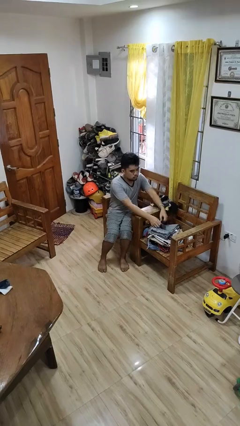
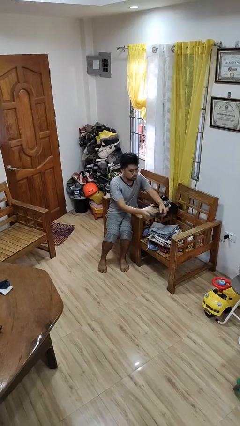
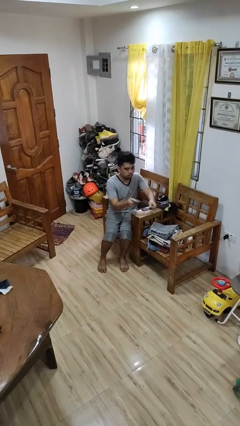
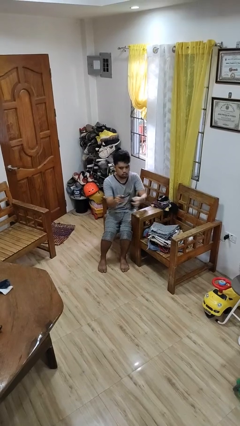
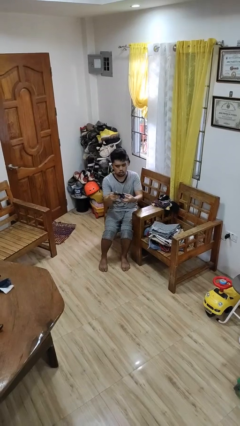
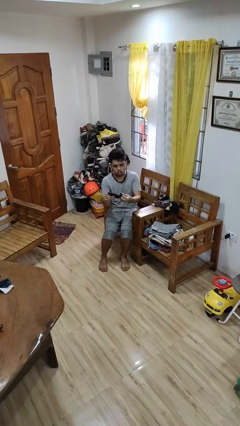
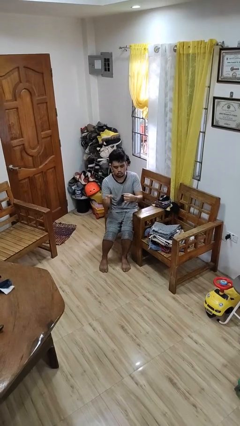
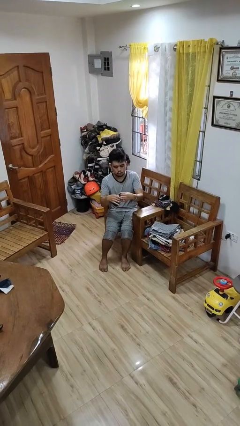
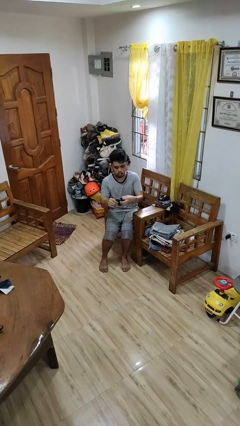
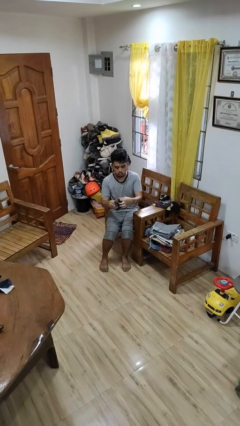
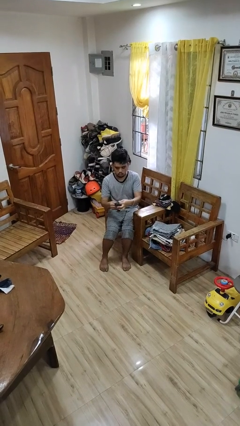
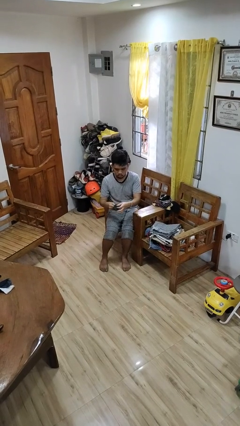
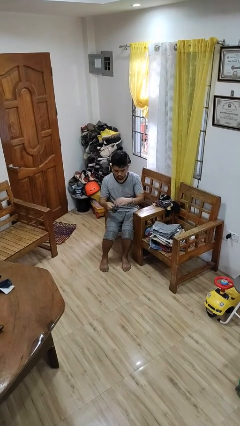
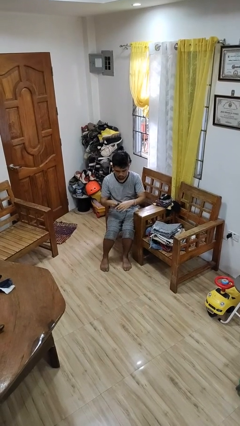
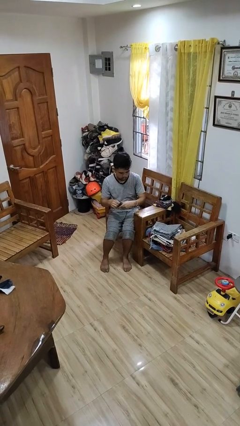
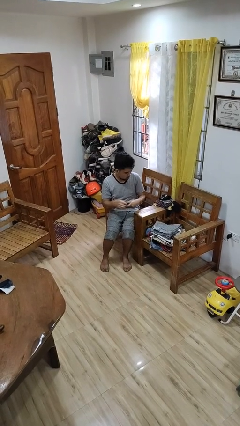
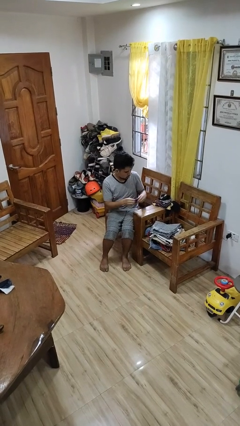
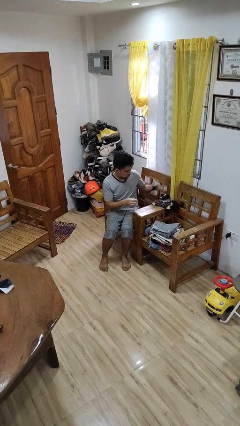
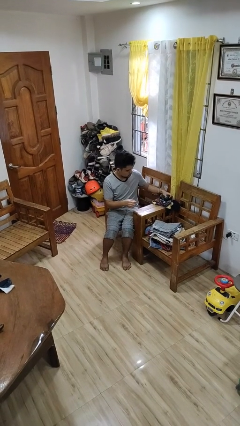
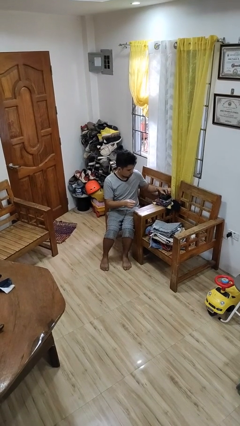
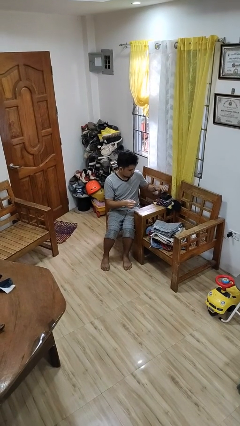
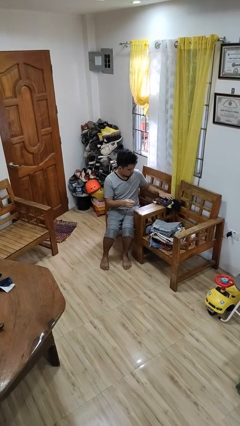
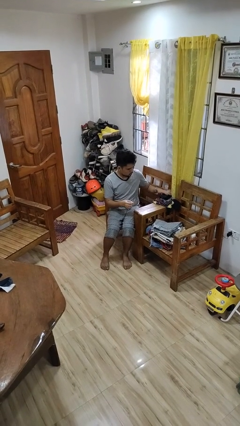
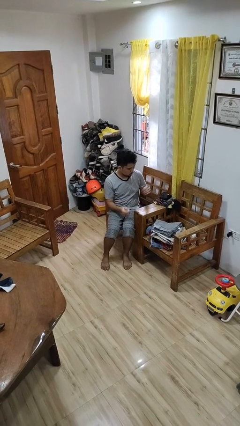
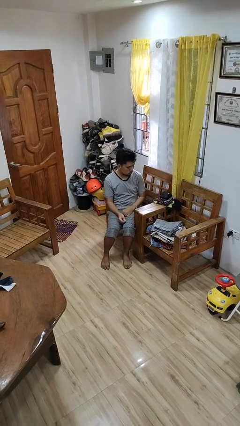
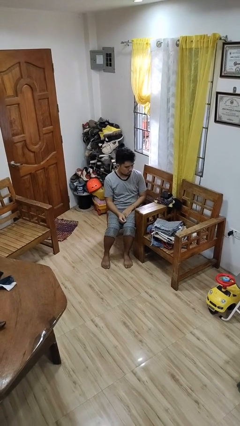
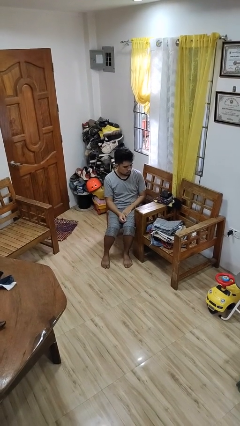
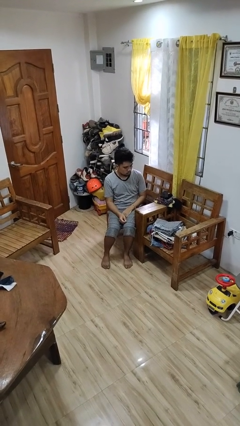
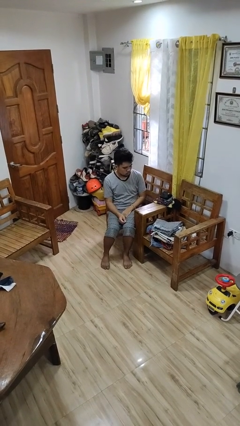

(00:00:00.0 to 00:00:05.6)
person folds socks

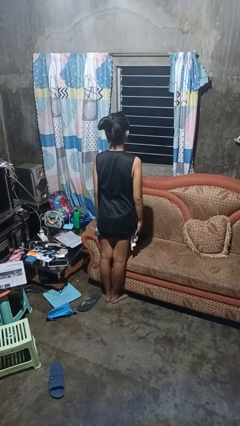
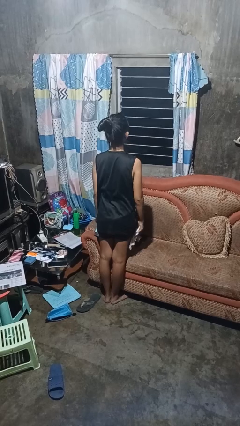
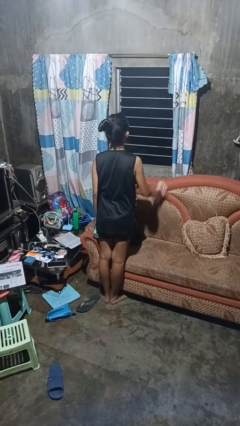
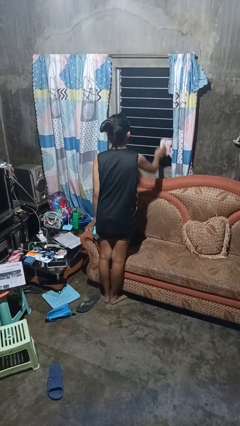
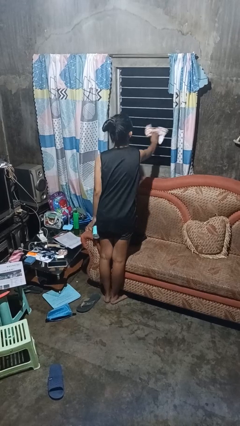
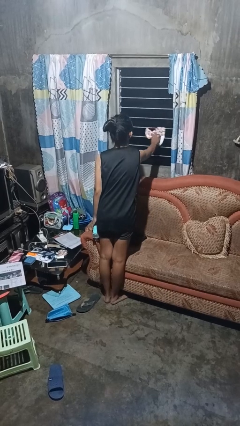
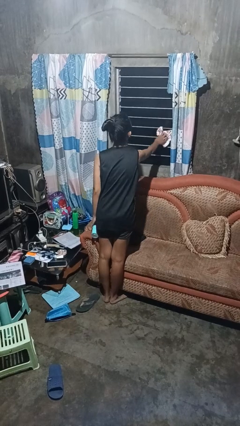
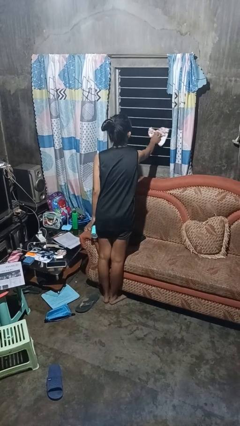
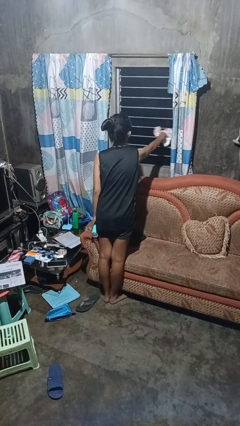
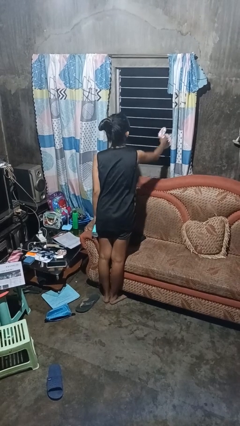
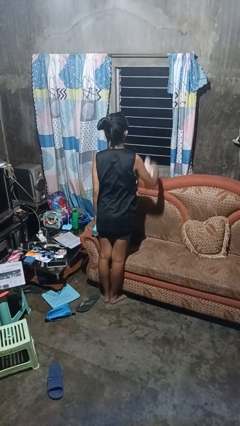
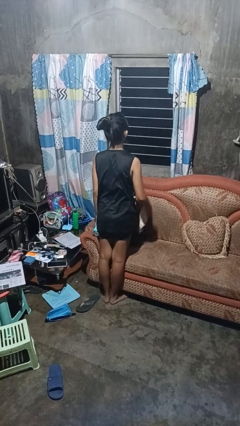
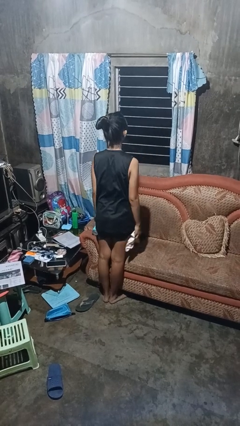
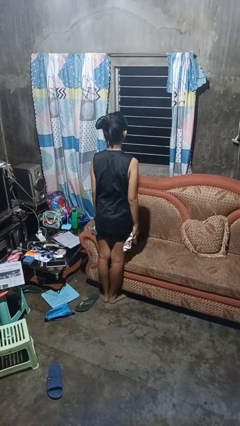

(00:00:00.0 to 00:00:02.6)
person washes window

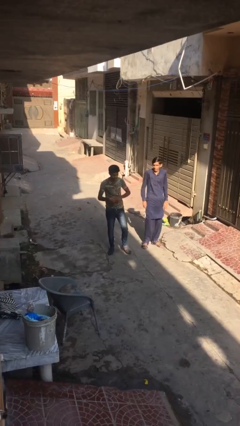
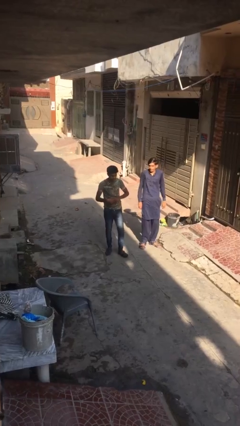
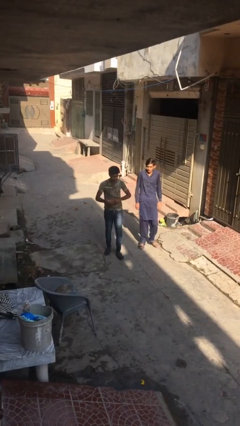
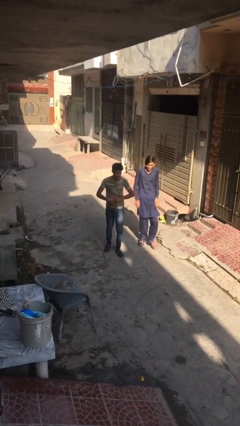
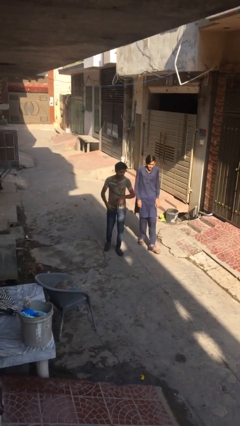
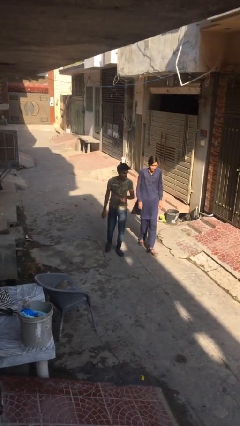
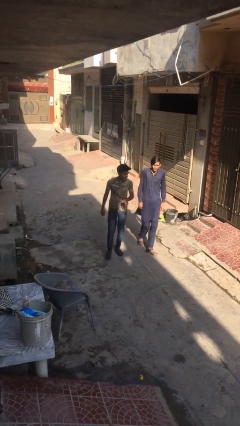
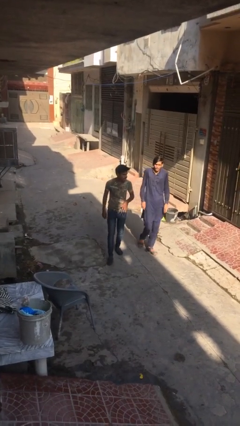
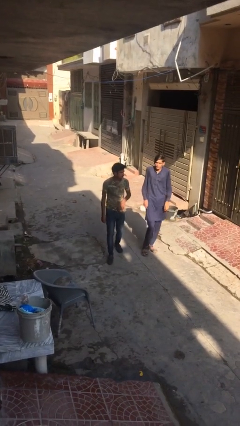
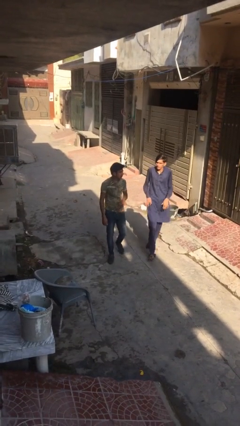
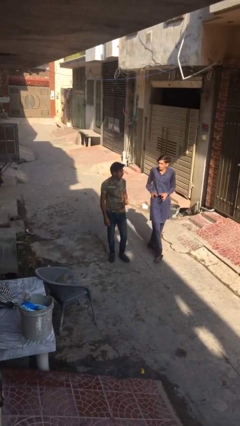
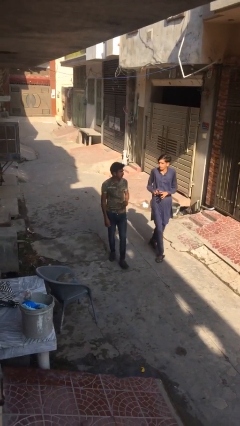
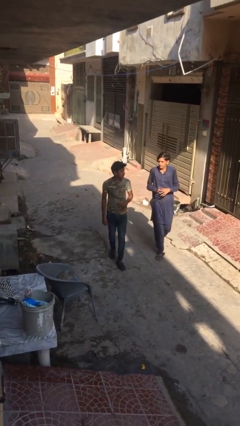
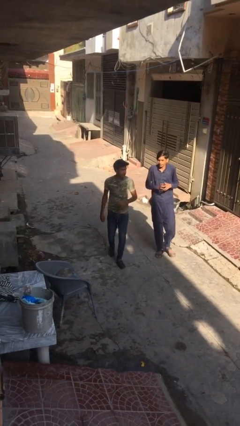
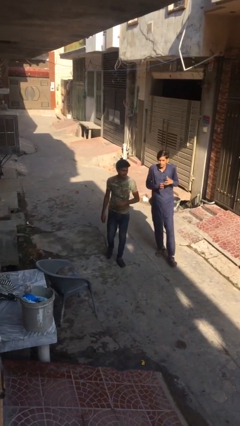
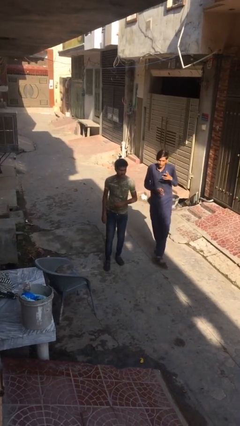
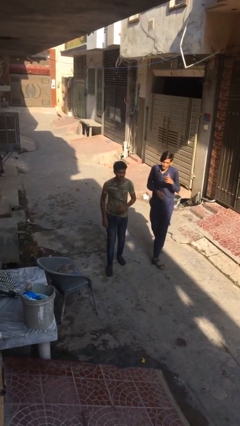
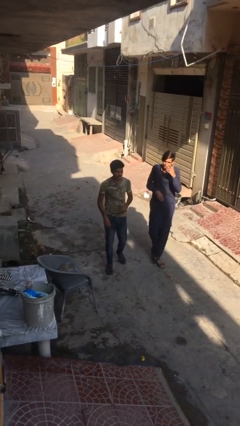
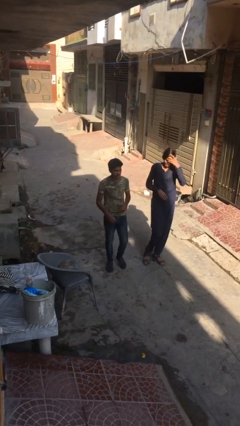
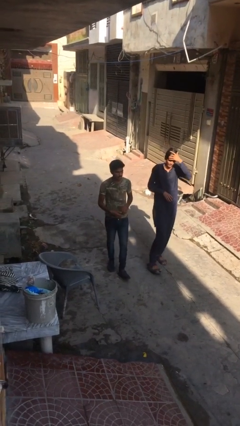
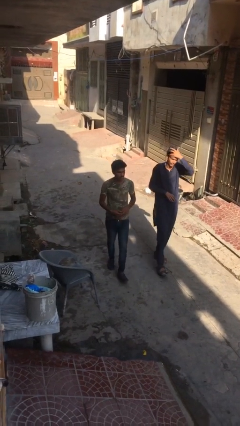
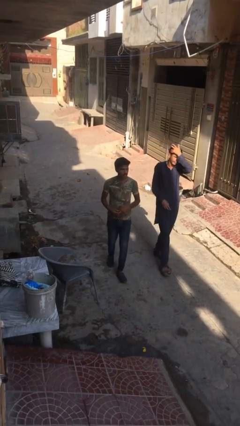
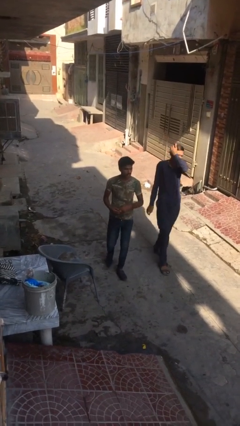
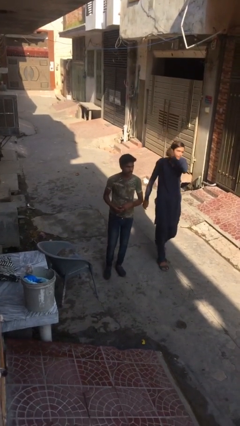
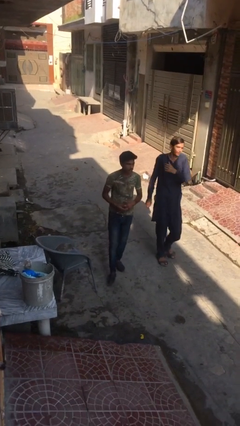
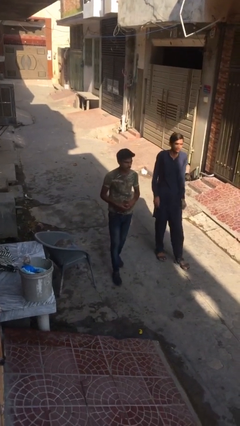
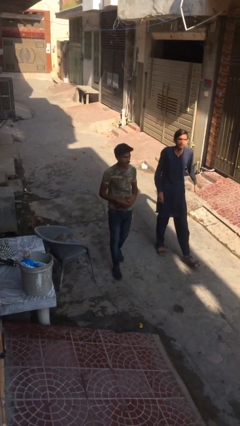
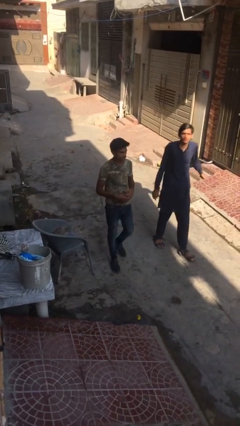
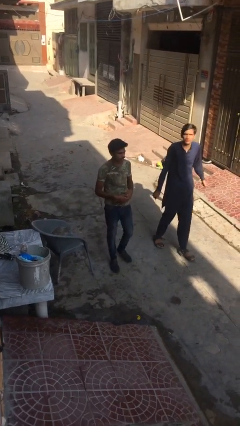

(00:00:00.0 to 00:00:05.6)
person talks to person

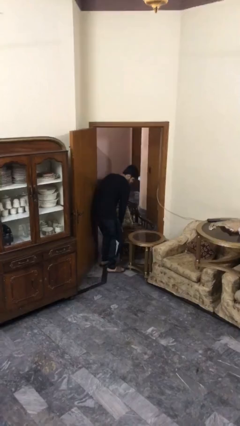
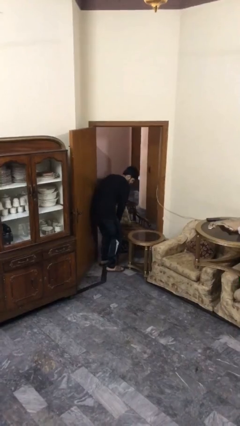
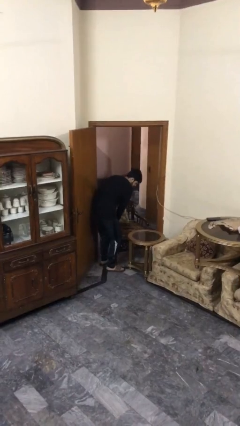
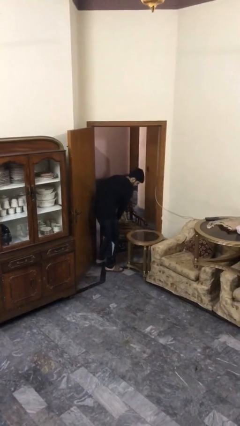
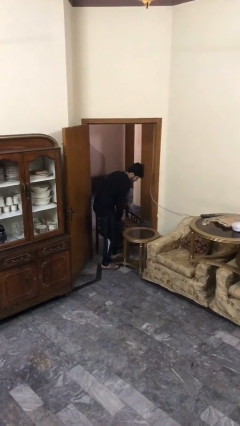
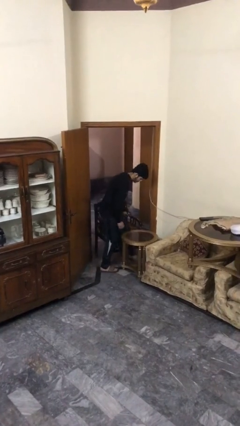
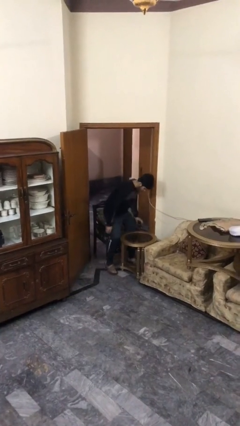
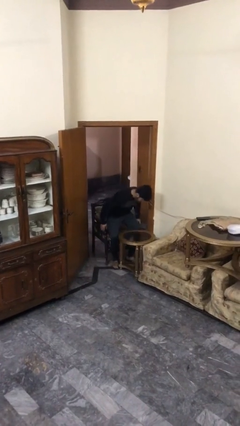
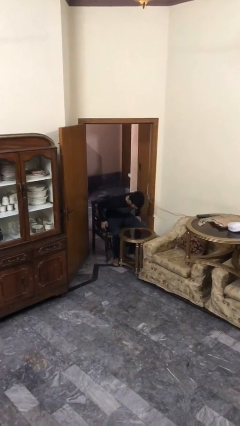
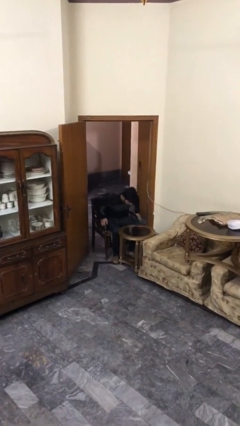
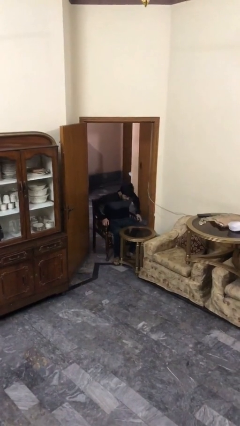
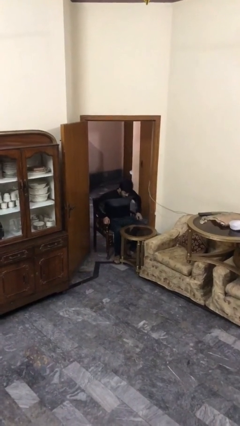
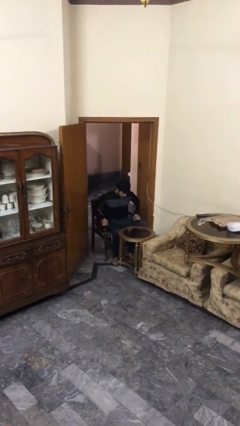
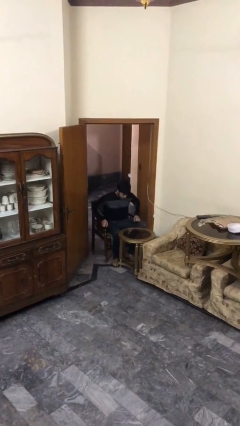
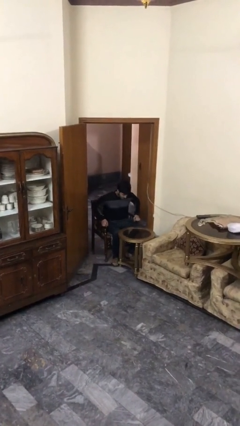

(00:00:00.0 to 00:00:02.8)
person sits down

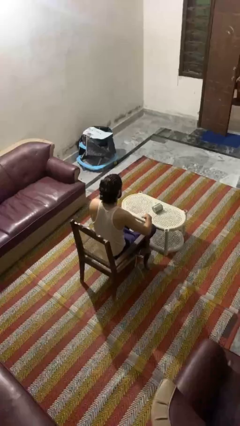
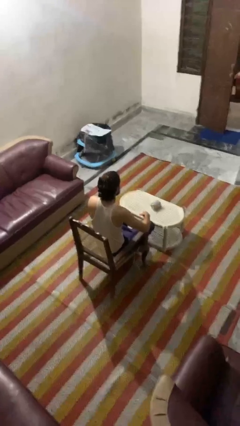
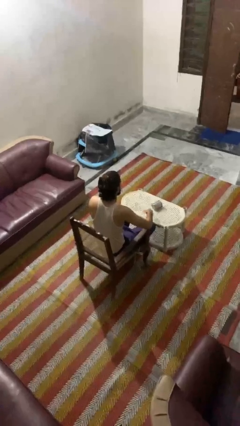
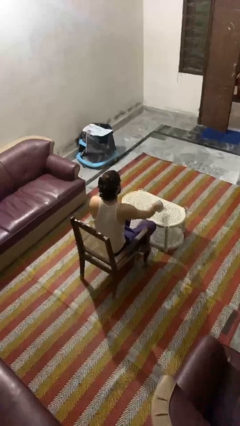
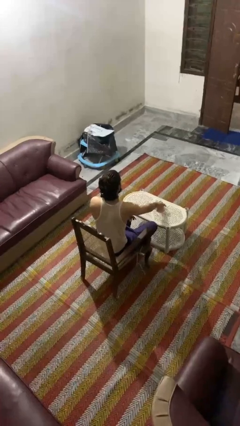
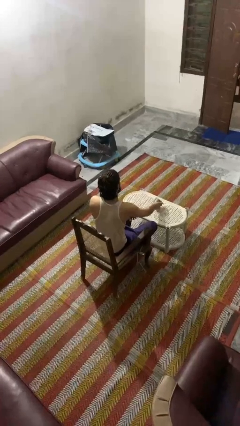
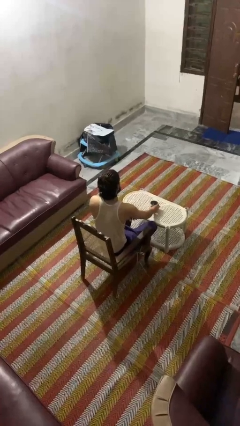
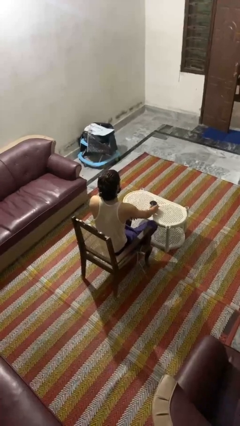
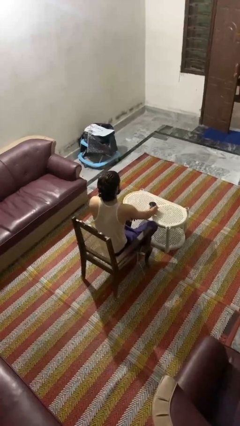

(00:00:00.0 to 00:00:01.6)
person sets upright furniture
